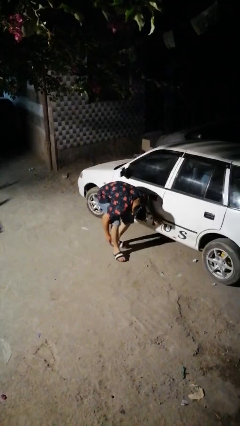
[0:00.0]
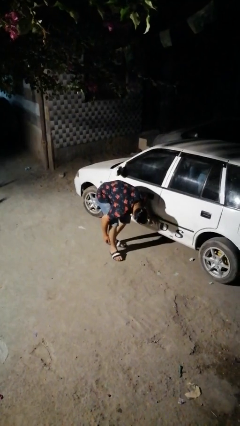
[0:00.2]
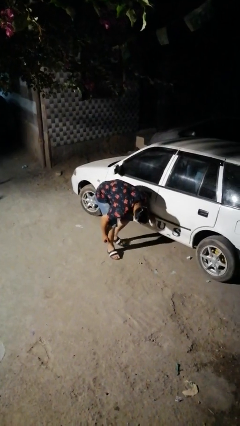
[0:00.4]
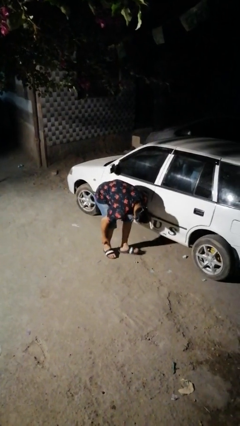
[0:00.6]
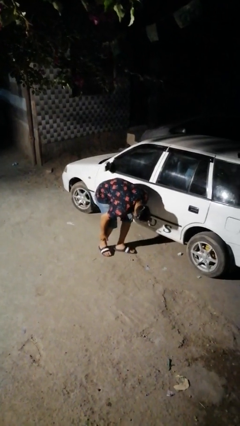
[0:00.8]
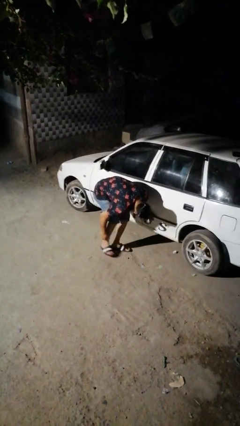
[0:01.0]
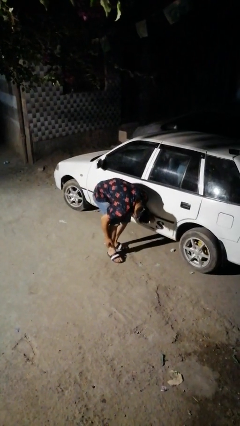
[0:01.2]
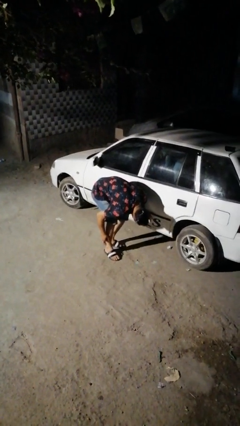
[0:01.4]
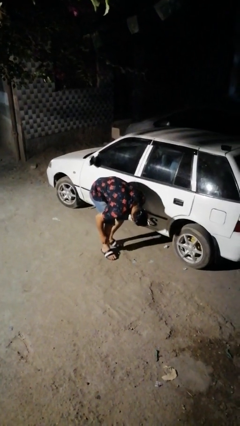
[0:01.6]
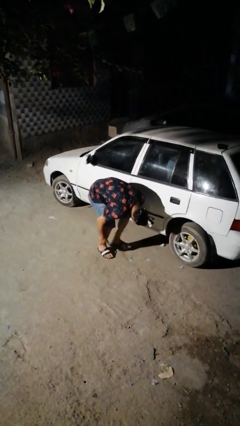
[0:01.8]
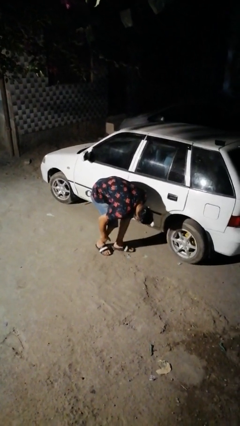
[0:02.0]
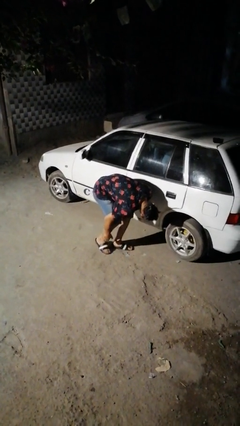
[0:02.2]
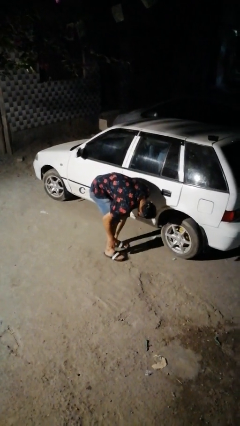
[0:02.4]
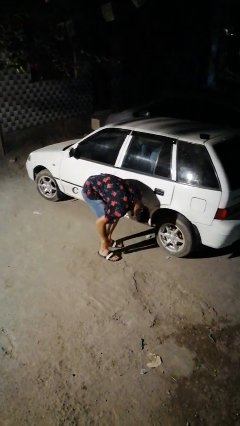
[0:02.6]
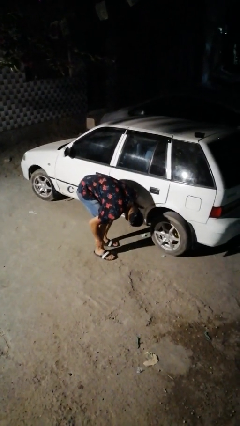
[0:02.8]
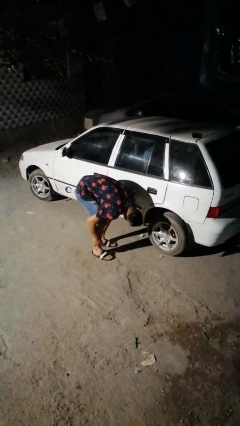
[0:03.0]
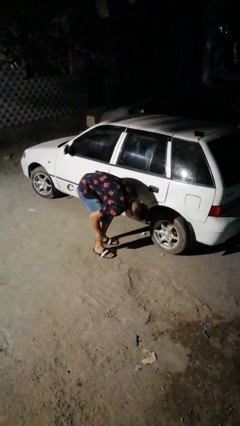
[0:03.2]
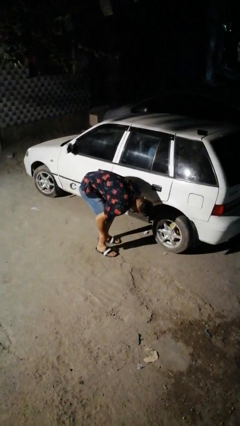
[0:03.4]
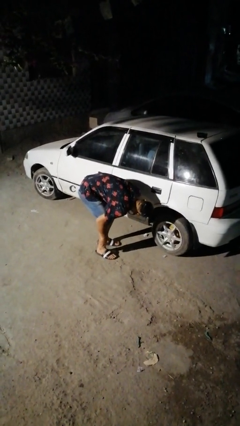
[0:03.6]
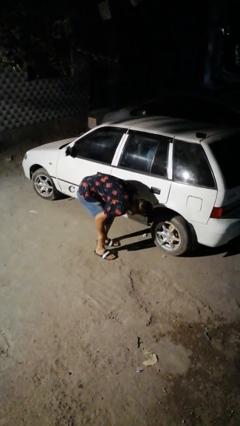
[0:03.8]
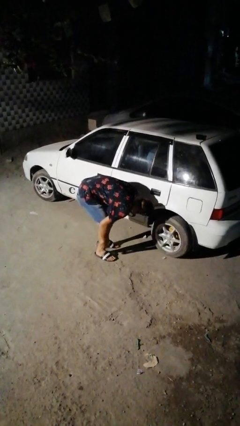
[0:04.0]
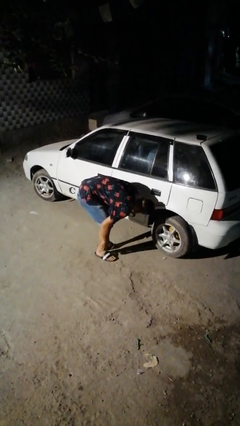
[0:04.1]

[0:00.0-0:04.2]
person crawls out from under vehicle

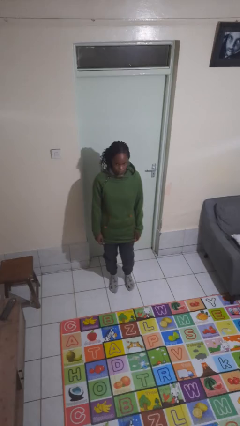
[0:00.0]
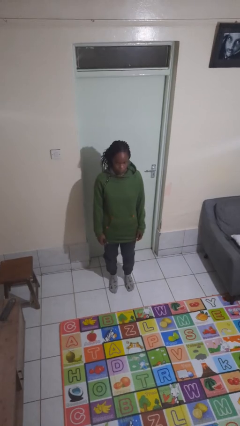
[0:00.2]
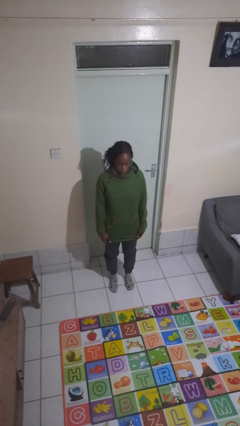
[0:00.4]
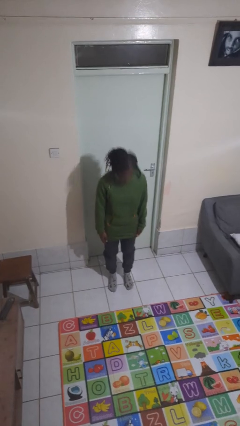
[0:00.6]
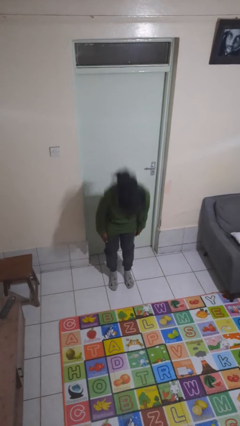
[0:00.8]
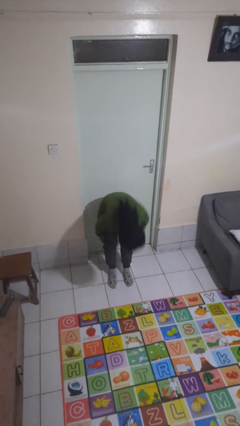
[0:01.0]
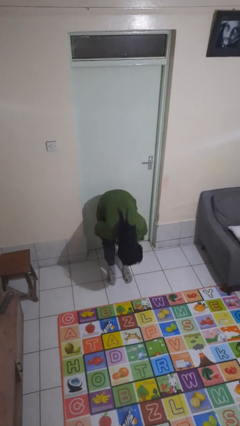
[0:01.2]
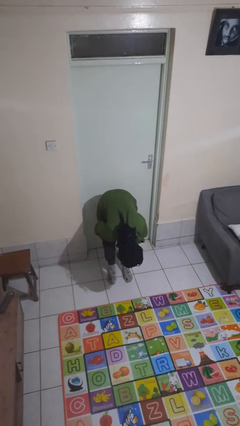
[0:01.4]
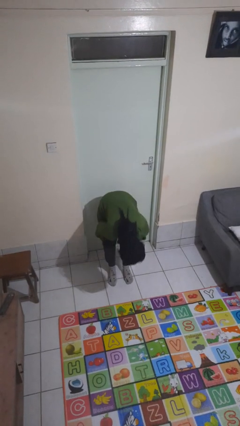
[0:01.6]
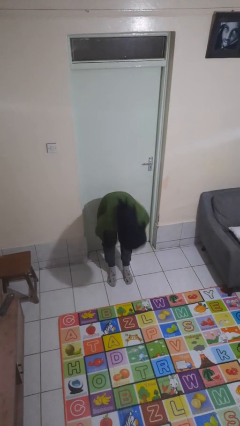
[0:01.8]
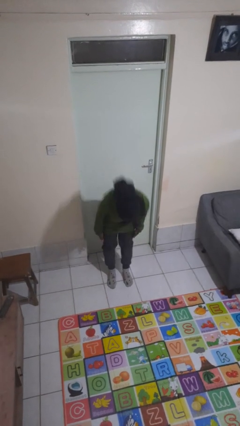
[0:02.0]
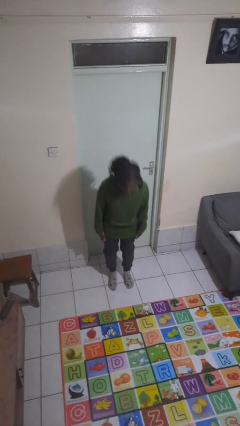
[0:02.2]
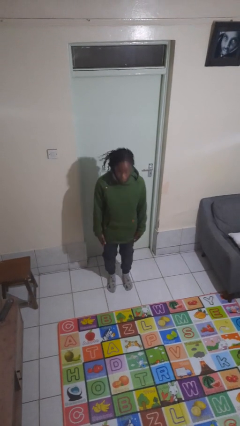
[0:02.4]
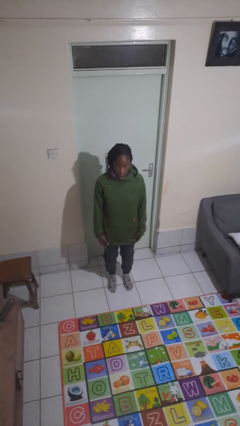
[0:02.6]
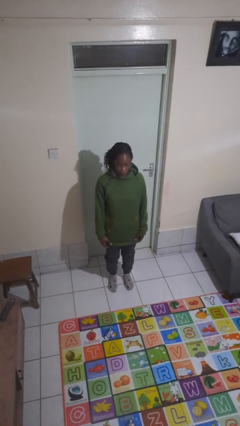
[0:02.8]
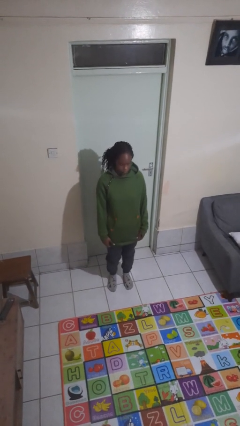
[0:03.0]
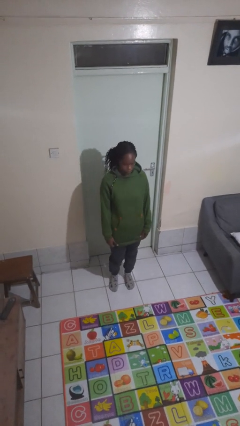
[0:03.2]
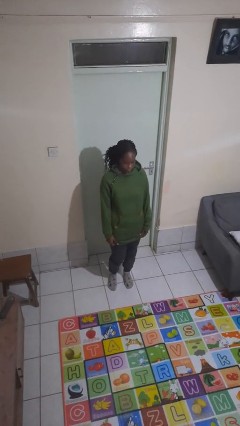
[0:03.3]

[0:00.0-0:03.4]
person bows

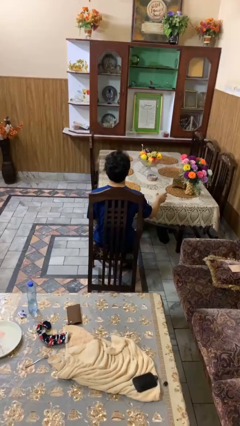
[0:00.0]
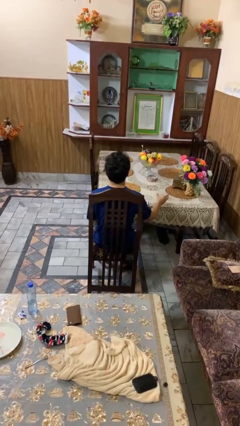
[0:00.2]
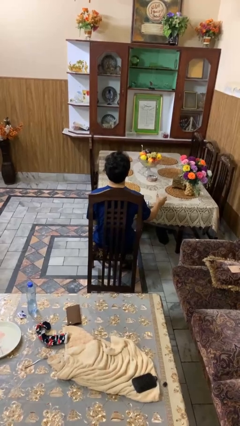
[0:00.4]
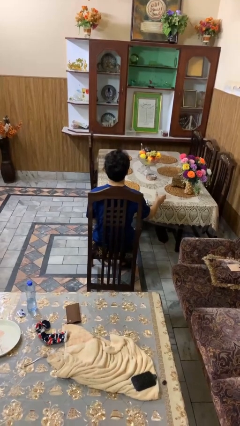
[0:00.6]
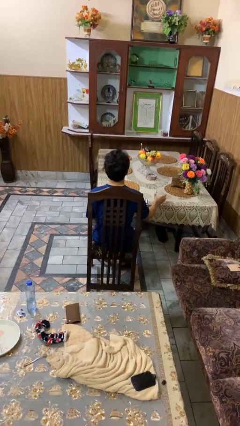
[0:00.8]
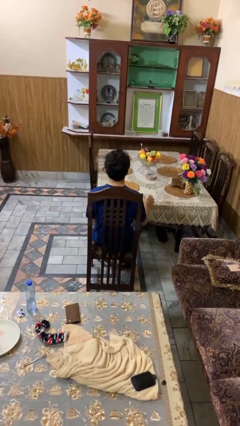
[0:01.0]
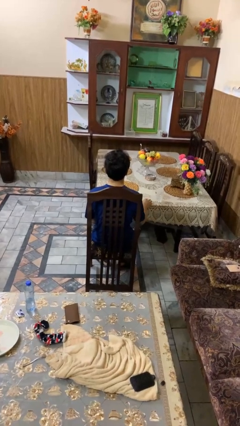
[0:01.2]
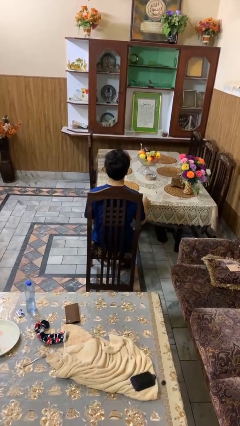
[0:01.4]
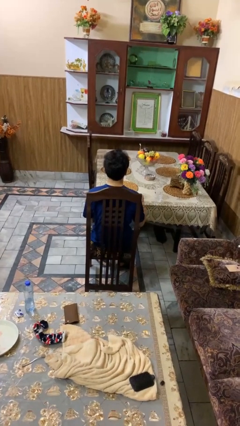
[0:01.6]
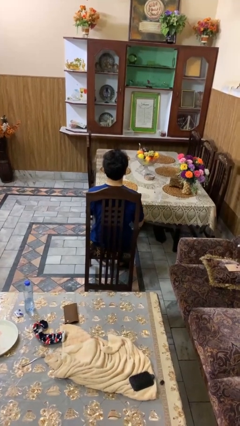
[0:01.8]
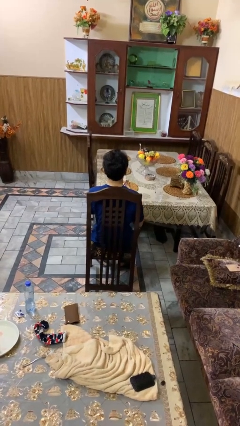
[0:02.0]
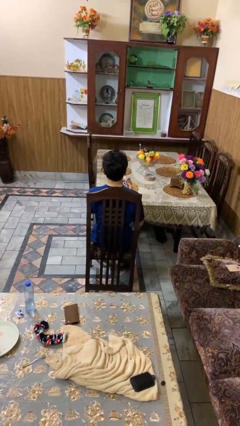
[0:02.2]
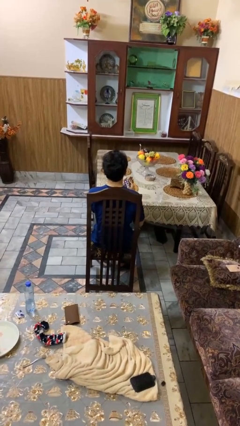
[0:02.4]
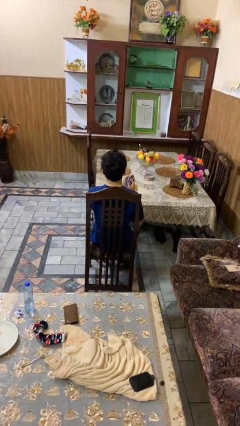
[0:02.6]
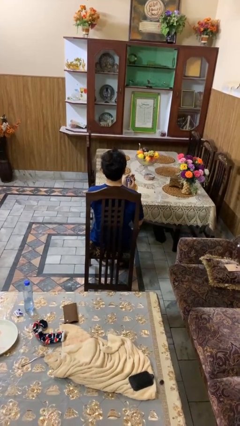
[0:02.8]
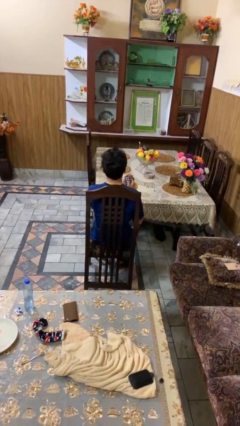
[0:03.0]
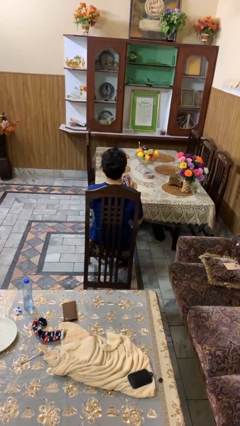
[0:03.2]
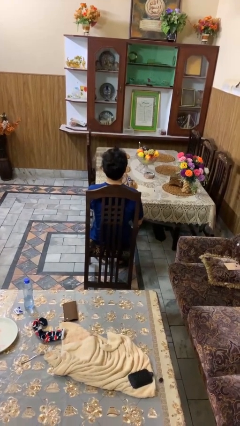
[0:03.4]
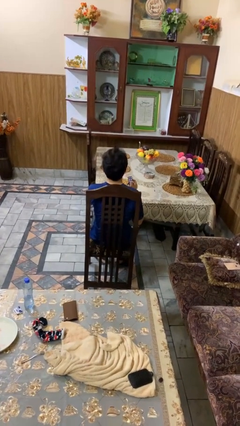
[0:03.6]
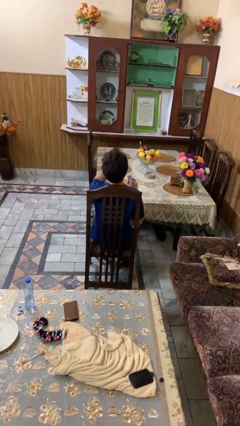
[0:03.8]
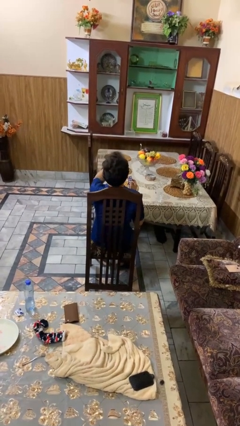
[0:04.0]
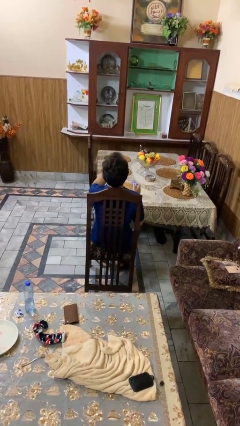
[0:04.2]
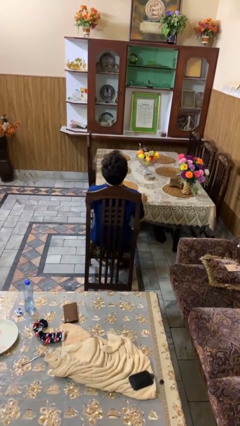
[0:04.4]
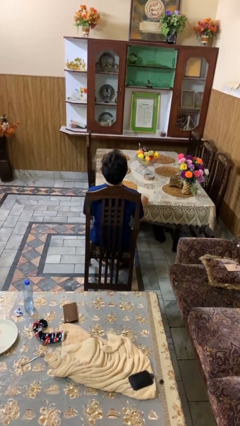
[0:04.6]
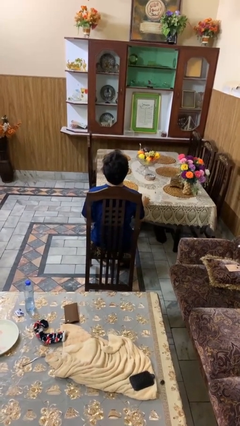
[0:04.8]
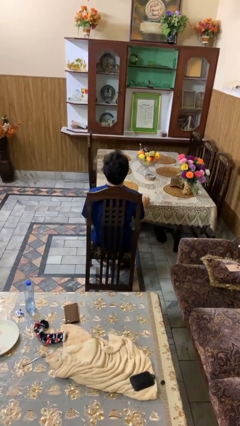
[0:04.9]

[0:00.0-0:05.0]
person takes medicine pills

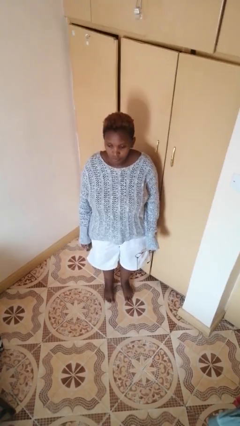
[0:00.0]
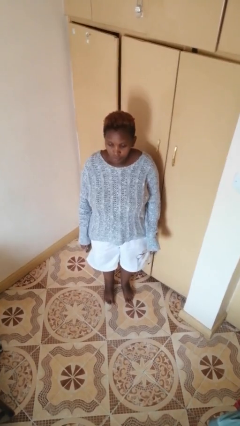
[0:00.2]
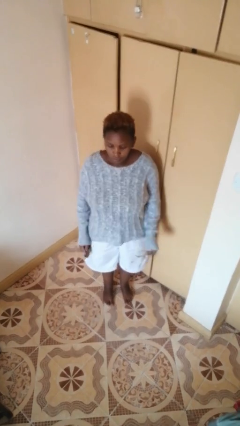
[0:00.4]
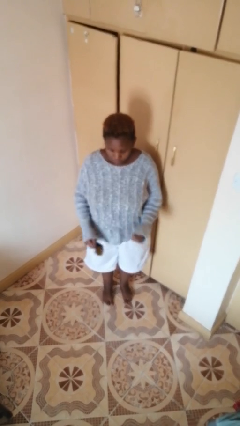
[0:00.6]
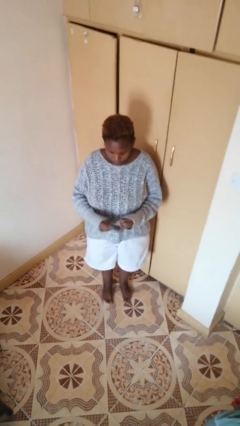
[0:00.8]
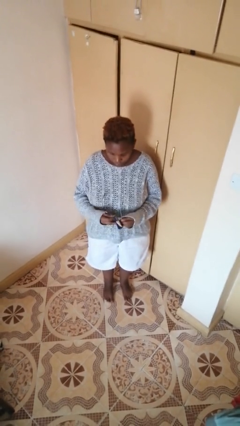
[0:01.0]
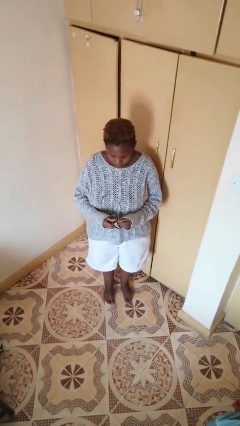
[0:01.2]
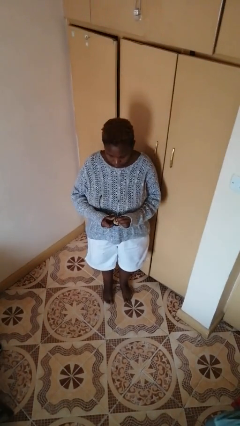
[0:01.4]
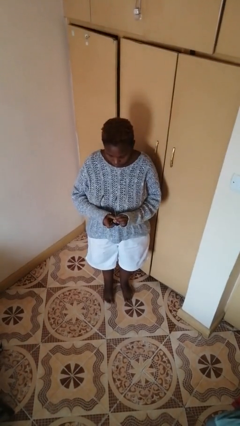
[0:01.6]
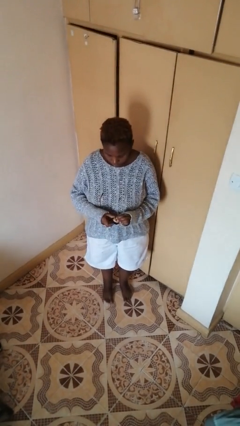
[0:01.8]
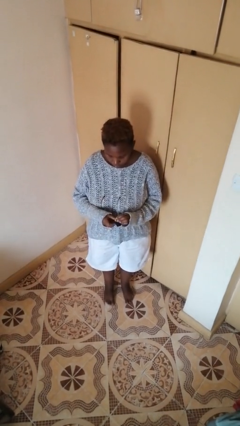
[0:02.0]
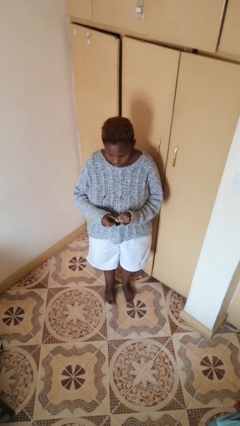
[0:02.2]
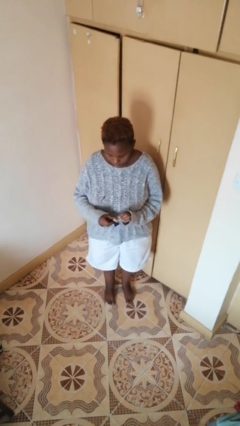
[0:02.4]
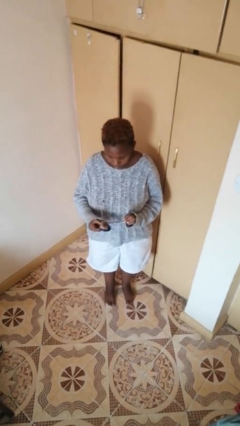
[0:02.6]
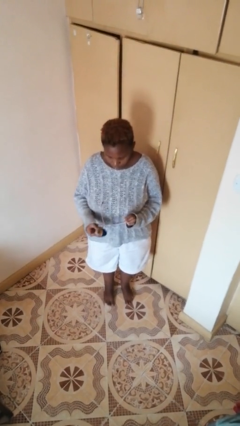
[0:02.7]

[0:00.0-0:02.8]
person cleans eyeglasses

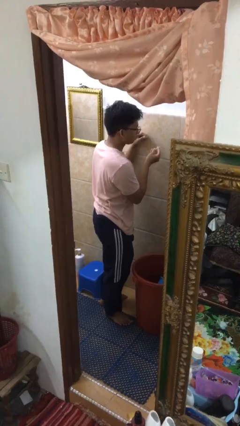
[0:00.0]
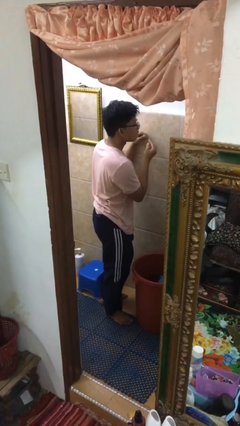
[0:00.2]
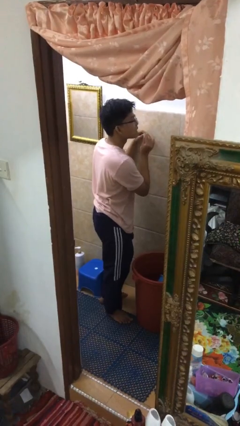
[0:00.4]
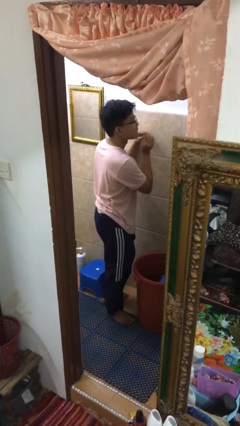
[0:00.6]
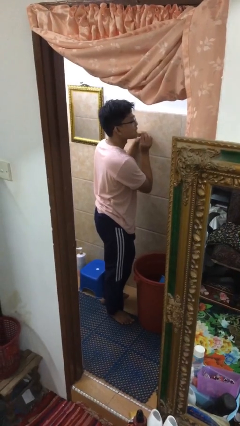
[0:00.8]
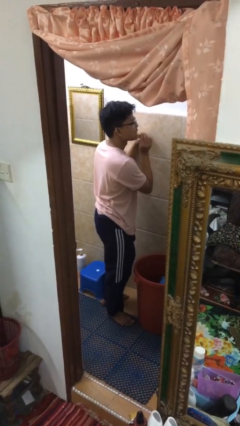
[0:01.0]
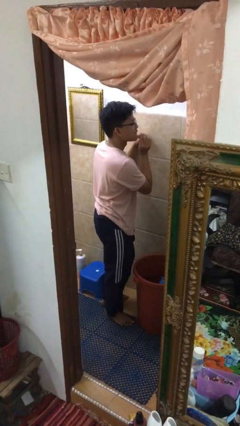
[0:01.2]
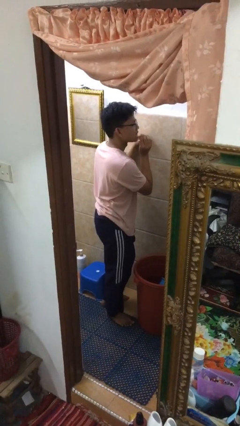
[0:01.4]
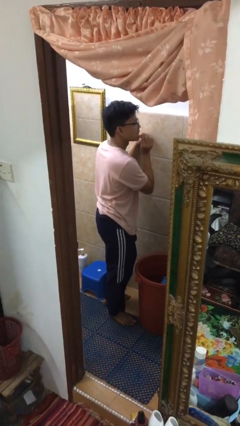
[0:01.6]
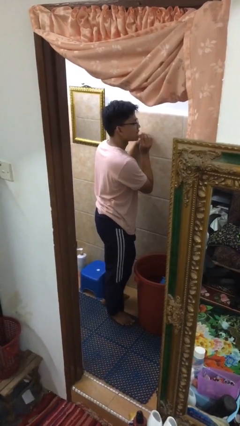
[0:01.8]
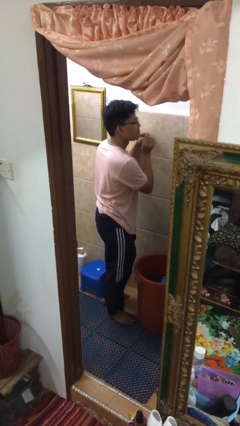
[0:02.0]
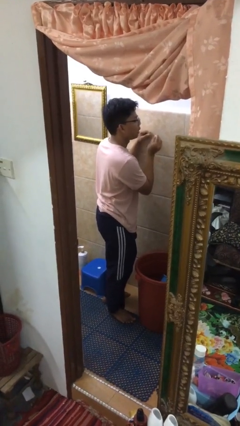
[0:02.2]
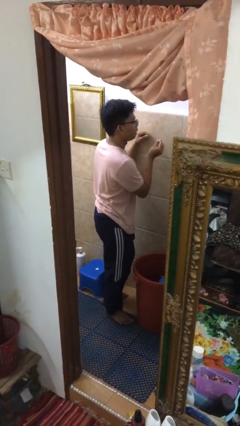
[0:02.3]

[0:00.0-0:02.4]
person flosses
